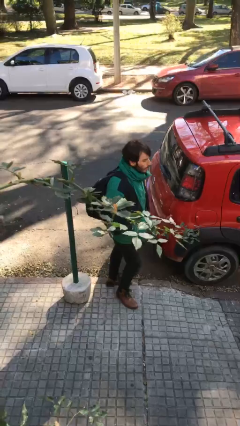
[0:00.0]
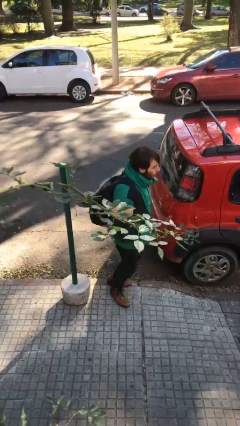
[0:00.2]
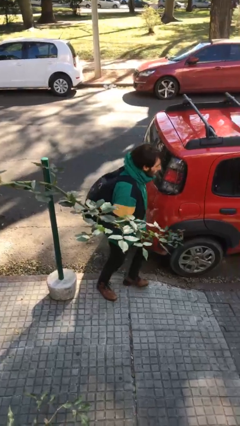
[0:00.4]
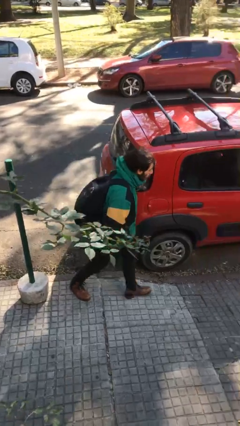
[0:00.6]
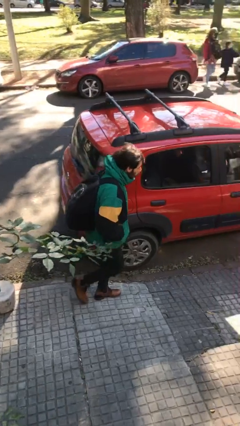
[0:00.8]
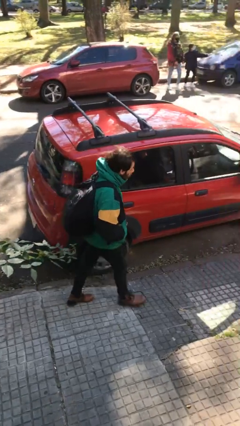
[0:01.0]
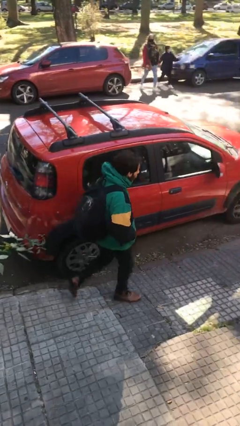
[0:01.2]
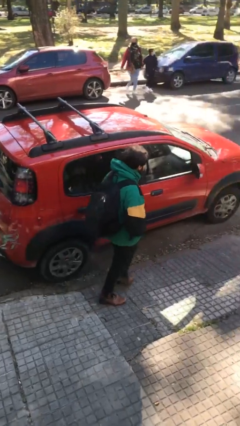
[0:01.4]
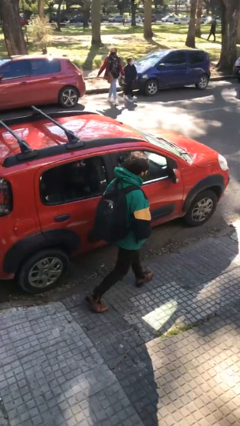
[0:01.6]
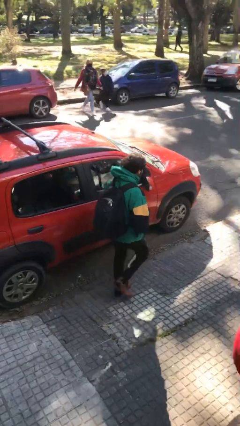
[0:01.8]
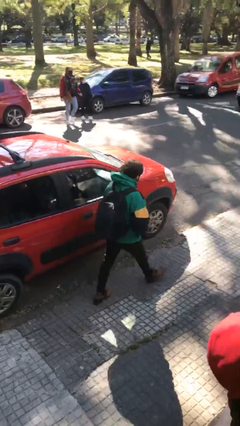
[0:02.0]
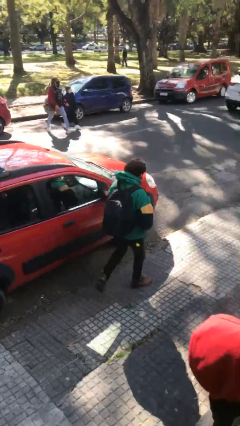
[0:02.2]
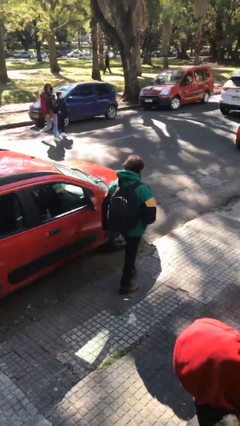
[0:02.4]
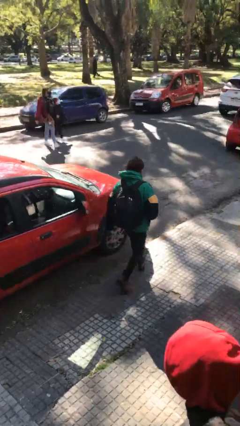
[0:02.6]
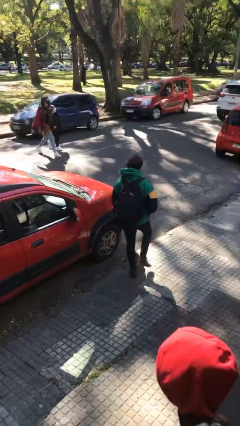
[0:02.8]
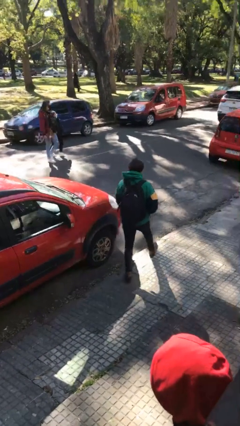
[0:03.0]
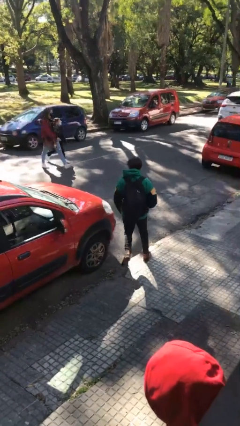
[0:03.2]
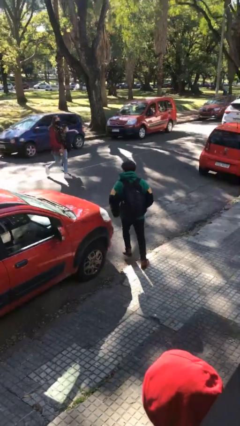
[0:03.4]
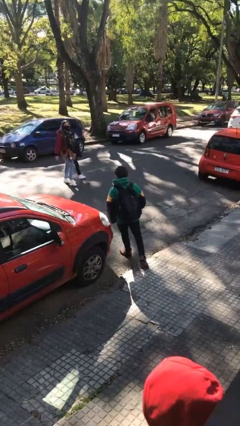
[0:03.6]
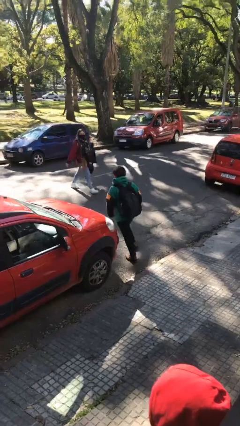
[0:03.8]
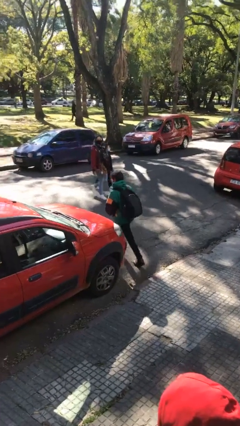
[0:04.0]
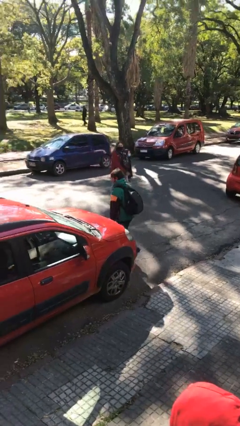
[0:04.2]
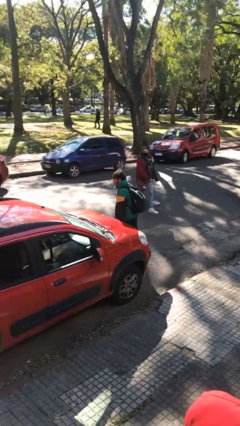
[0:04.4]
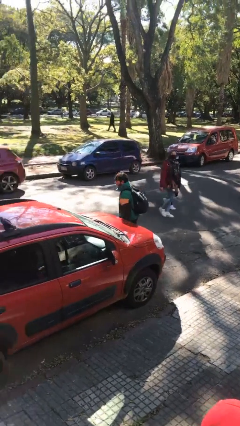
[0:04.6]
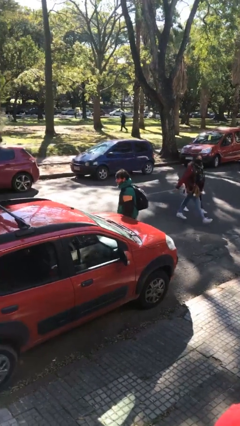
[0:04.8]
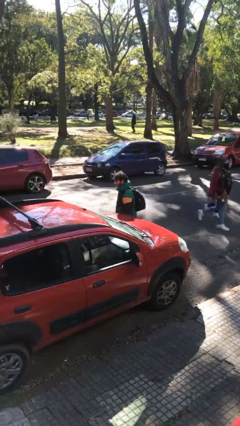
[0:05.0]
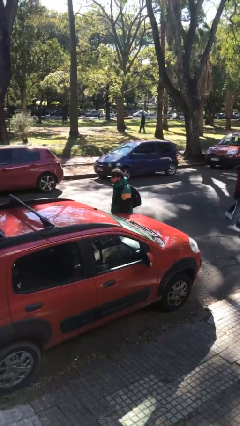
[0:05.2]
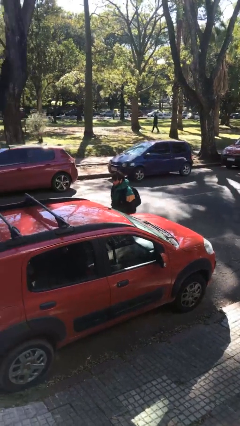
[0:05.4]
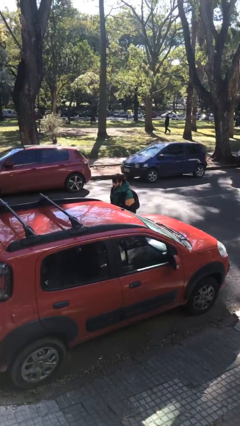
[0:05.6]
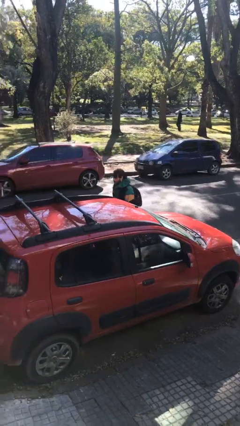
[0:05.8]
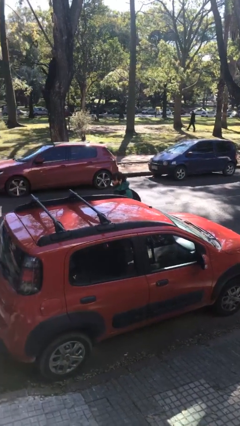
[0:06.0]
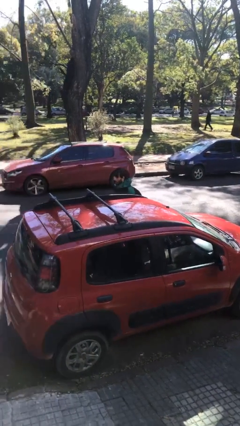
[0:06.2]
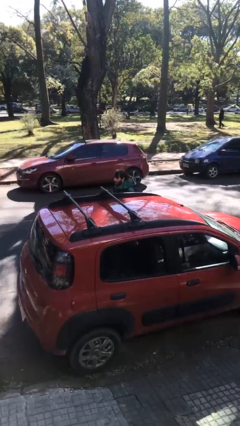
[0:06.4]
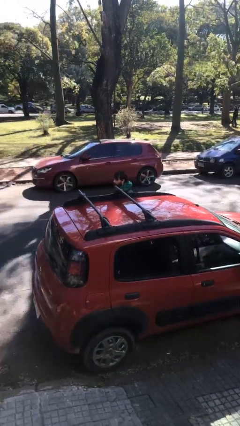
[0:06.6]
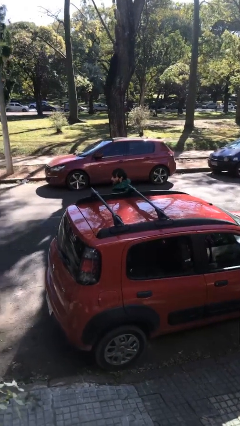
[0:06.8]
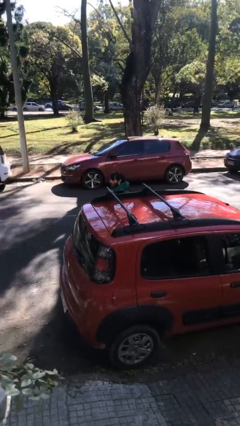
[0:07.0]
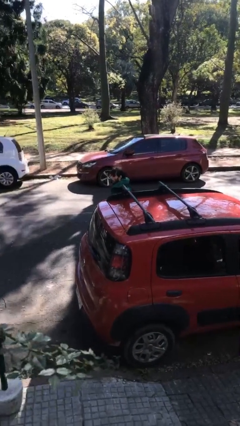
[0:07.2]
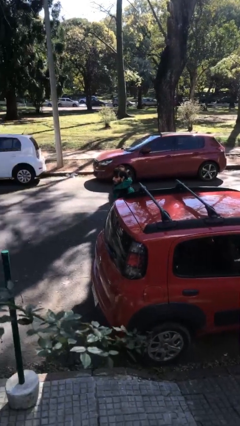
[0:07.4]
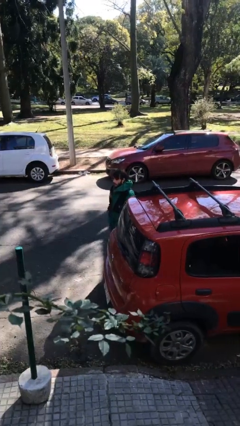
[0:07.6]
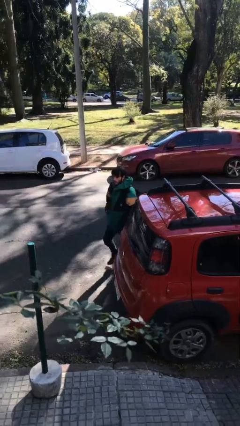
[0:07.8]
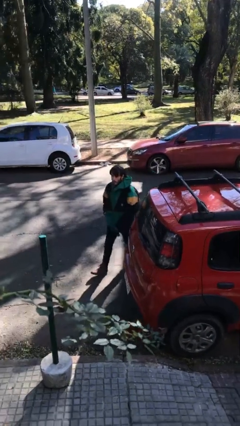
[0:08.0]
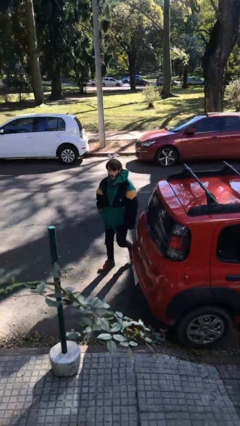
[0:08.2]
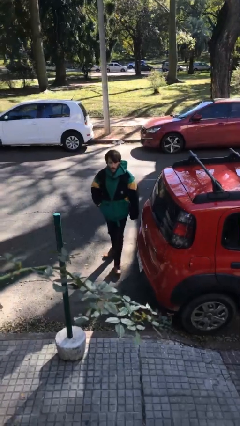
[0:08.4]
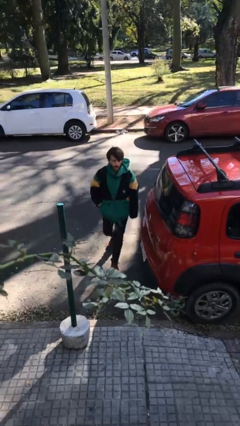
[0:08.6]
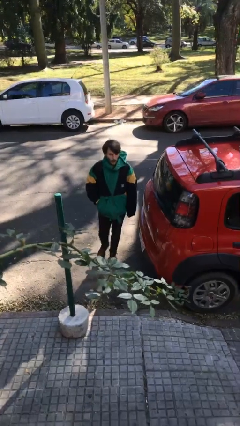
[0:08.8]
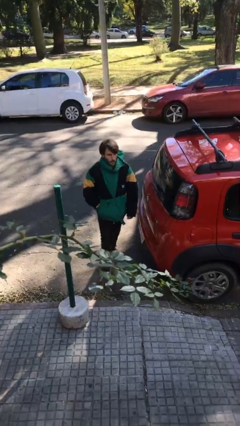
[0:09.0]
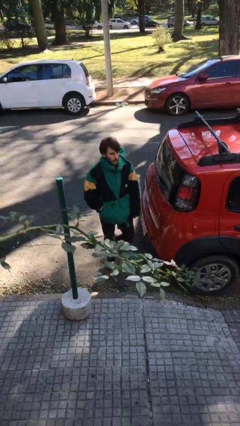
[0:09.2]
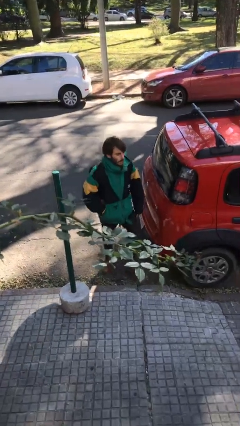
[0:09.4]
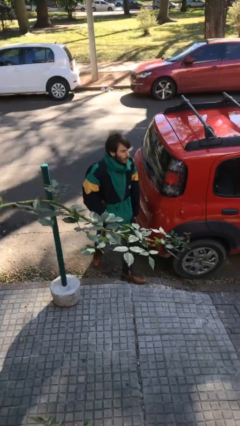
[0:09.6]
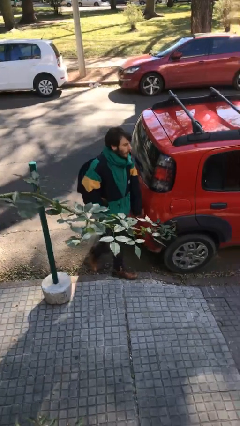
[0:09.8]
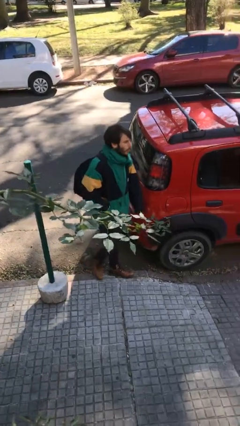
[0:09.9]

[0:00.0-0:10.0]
person walks around car

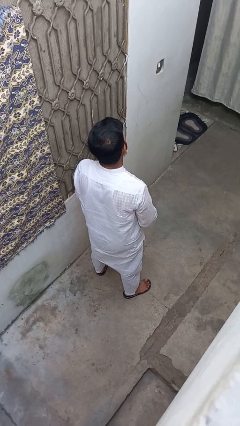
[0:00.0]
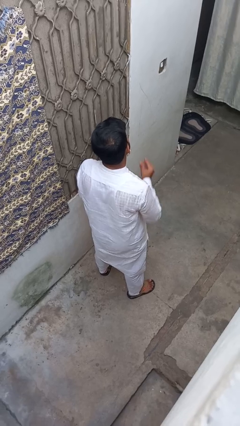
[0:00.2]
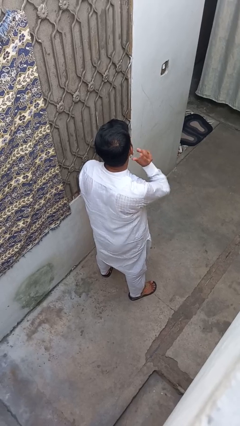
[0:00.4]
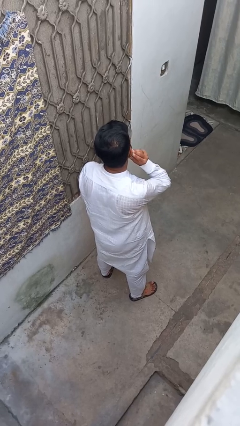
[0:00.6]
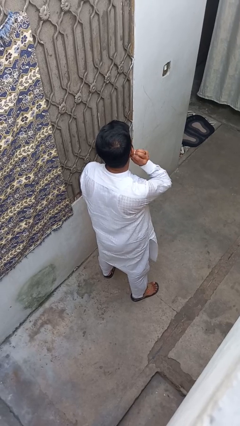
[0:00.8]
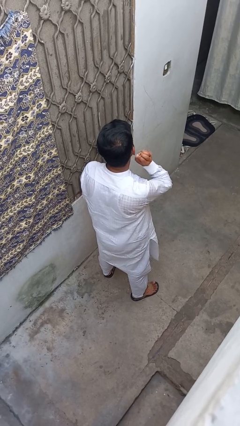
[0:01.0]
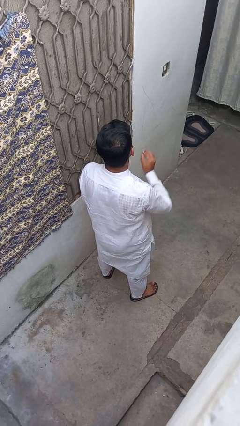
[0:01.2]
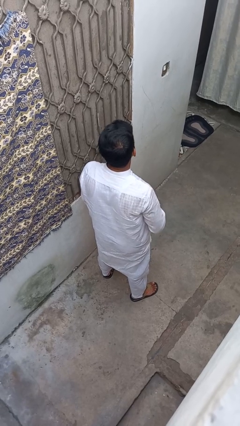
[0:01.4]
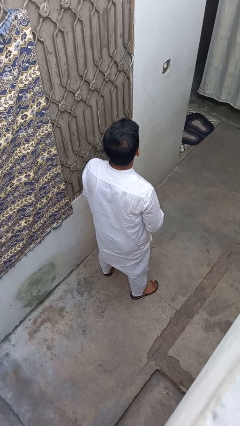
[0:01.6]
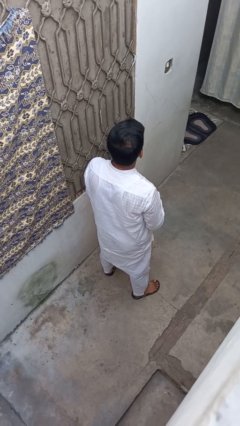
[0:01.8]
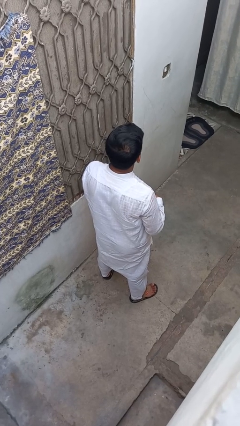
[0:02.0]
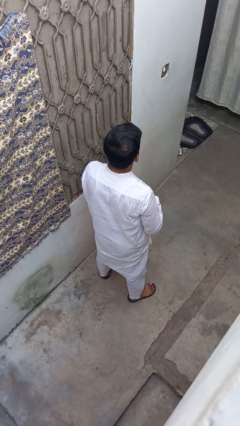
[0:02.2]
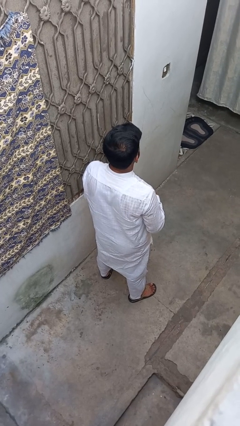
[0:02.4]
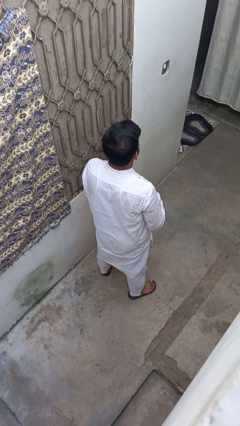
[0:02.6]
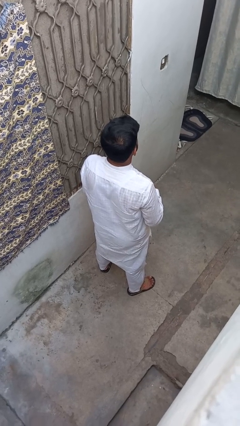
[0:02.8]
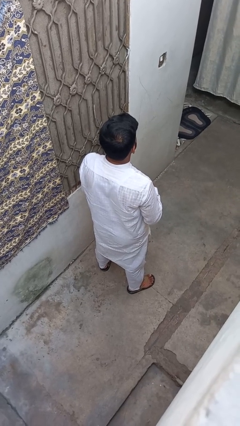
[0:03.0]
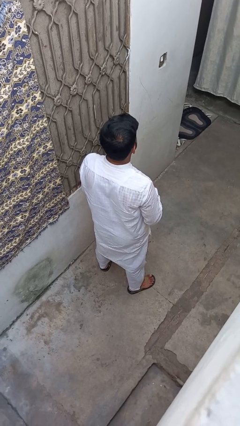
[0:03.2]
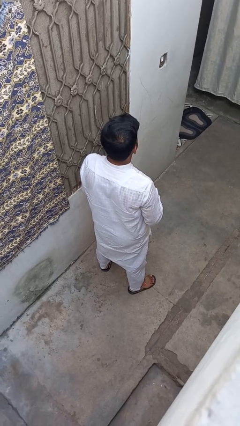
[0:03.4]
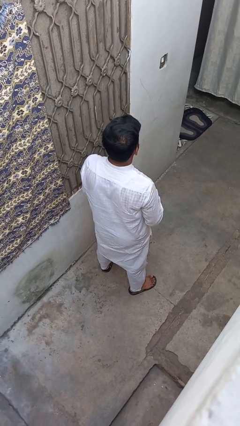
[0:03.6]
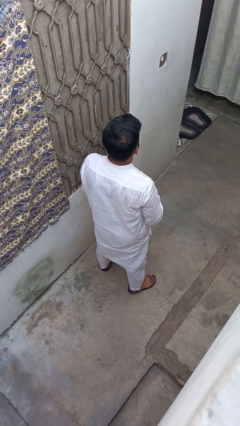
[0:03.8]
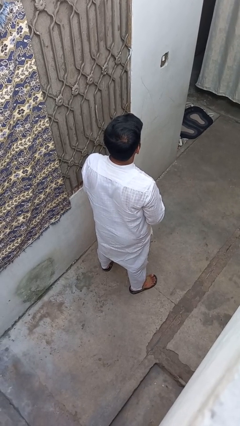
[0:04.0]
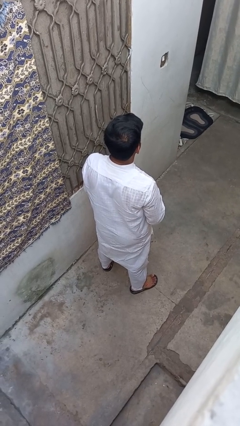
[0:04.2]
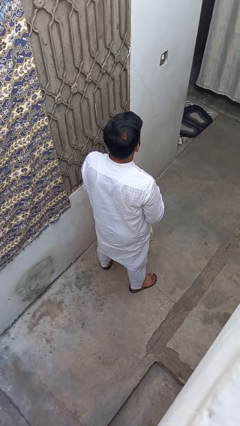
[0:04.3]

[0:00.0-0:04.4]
person takes off earrings

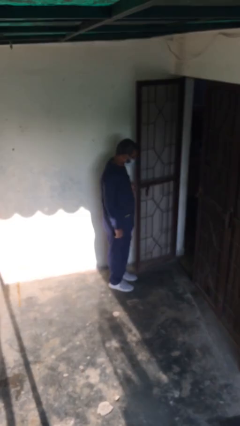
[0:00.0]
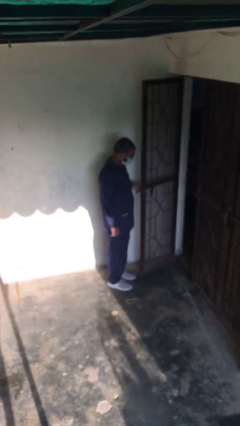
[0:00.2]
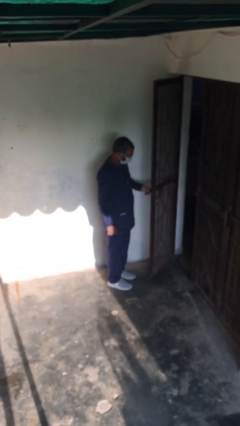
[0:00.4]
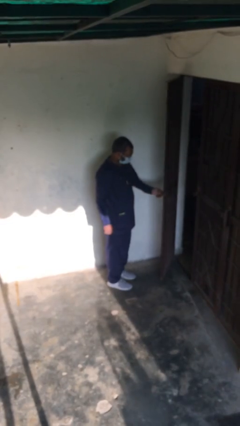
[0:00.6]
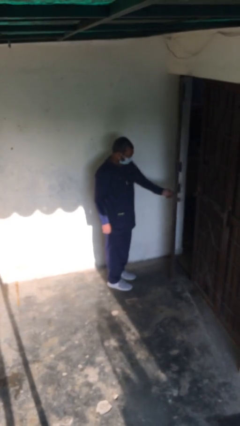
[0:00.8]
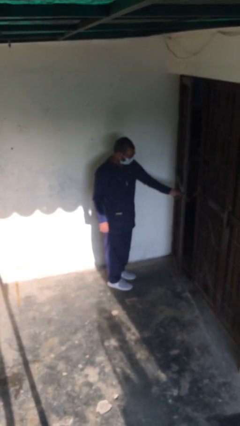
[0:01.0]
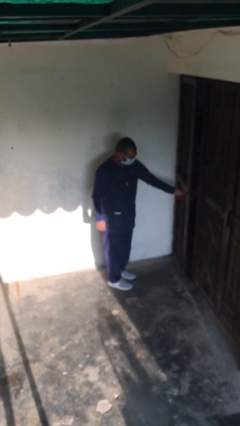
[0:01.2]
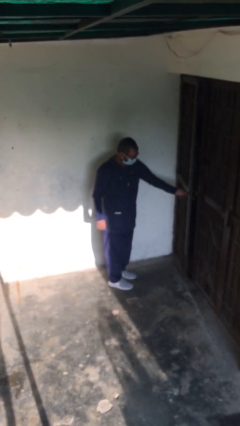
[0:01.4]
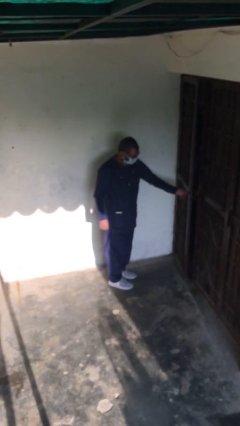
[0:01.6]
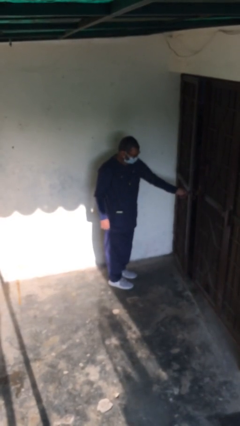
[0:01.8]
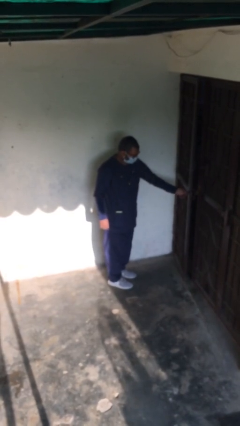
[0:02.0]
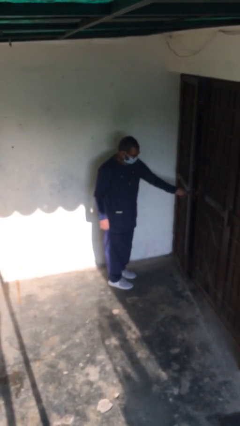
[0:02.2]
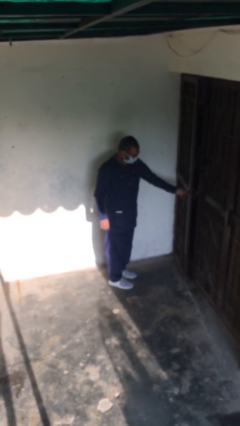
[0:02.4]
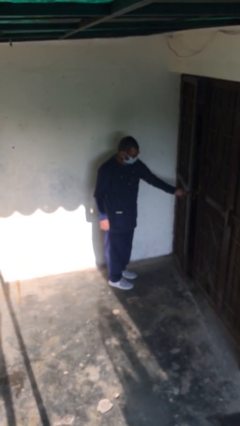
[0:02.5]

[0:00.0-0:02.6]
person closes facility door

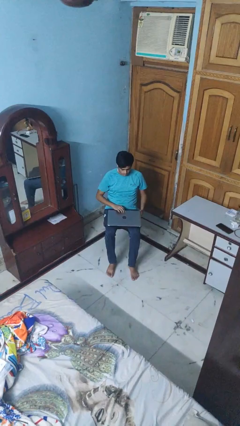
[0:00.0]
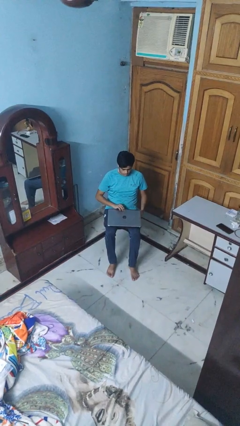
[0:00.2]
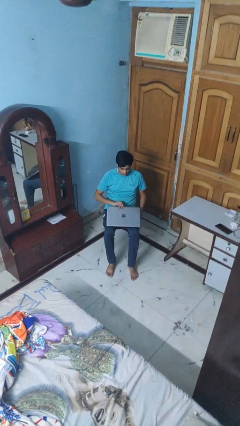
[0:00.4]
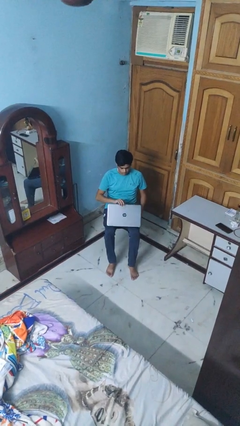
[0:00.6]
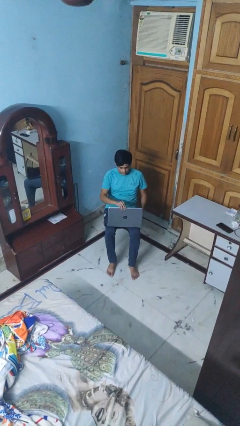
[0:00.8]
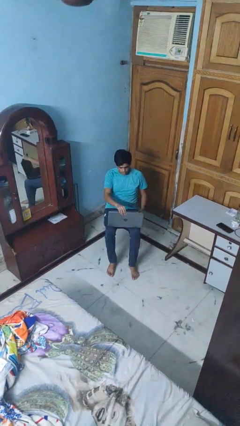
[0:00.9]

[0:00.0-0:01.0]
person opens laptop
